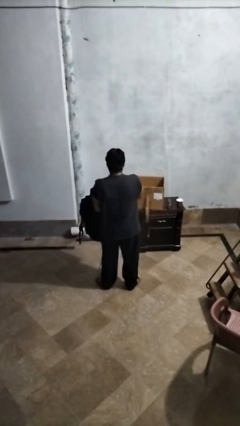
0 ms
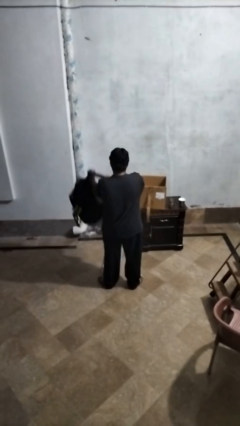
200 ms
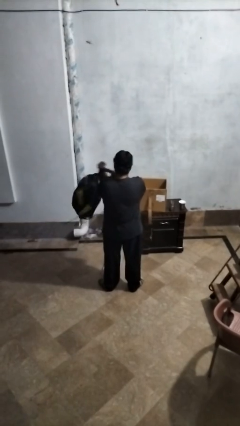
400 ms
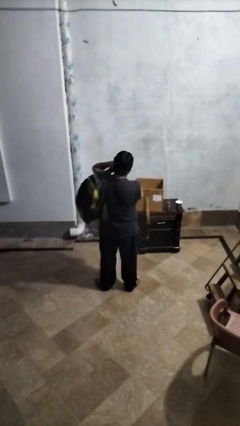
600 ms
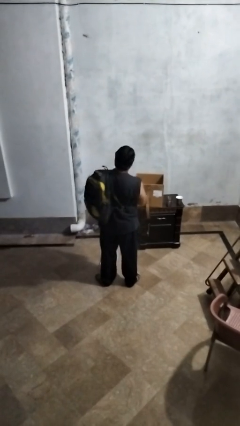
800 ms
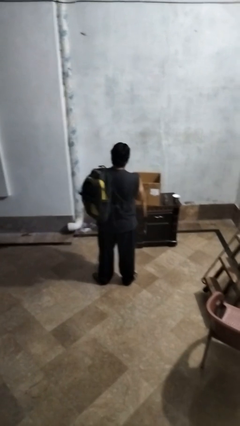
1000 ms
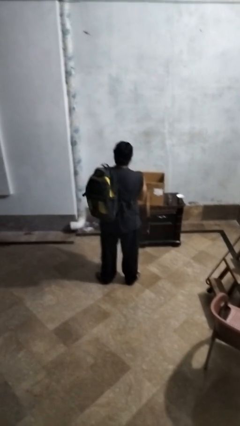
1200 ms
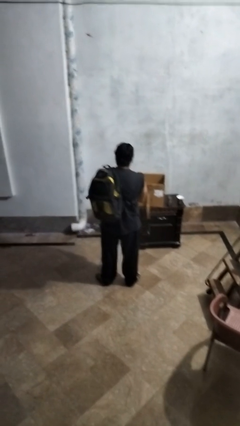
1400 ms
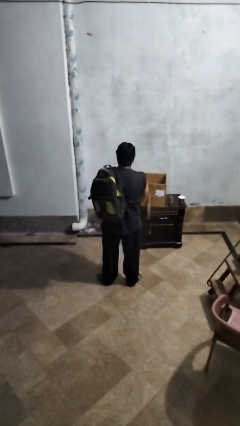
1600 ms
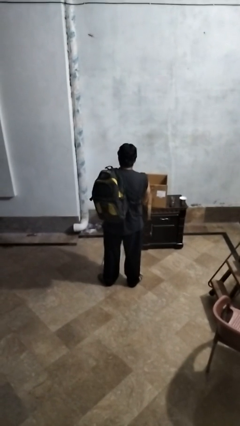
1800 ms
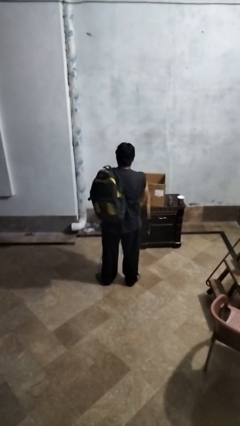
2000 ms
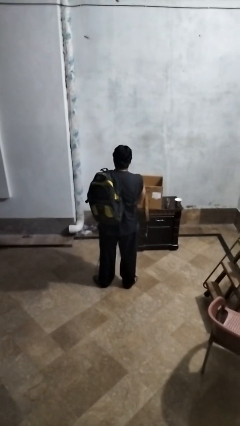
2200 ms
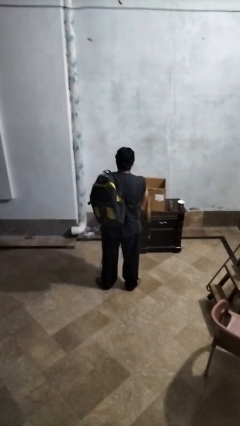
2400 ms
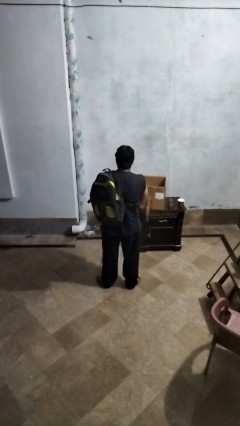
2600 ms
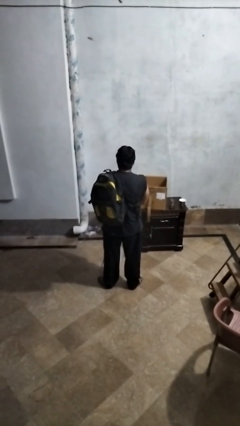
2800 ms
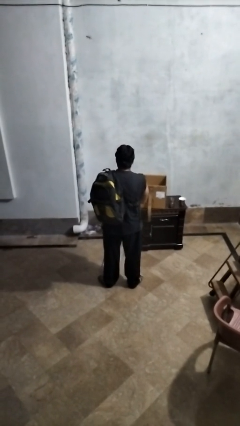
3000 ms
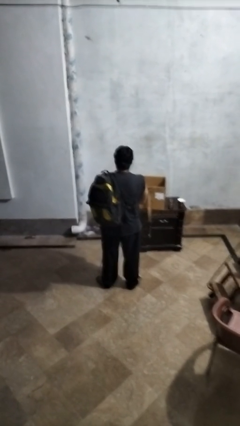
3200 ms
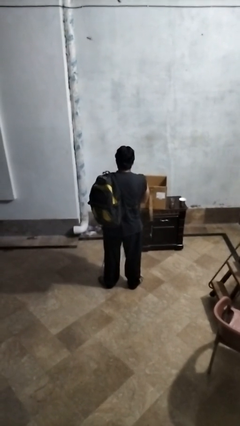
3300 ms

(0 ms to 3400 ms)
person puts on backpack

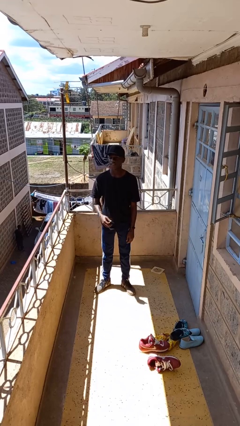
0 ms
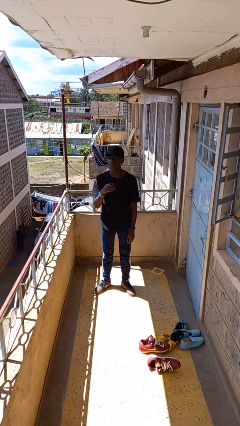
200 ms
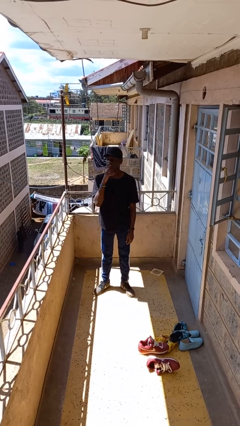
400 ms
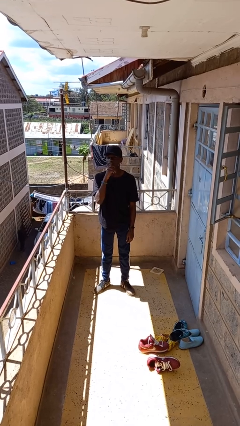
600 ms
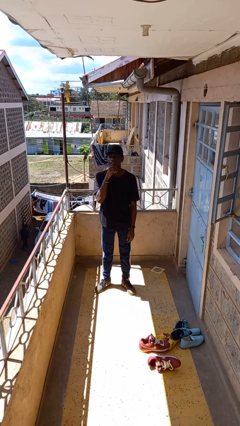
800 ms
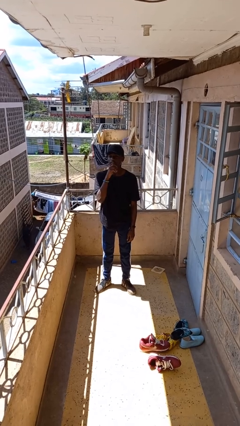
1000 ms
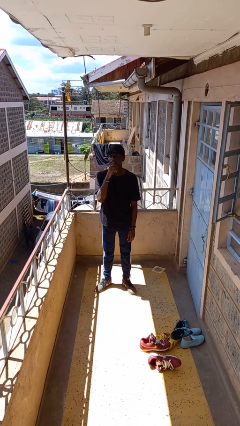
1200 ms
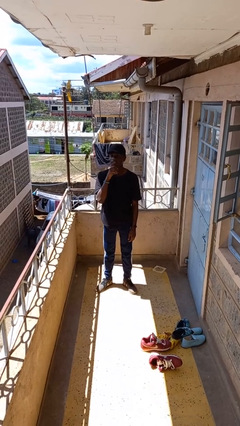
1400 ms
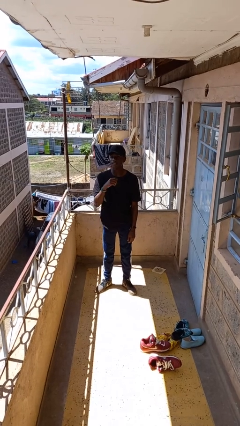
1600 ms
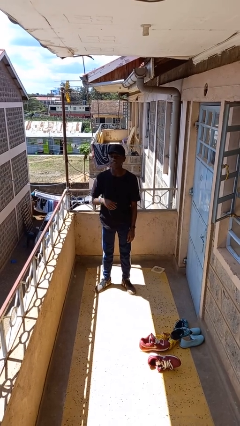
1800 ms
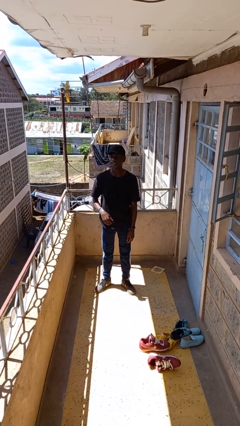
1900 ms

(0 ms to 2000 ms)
person strokes chin

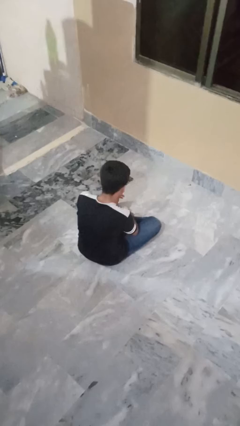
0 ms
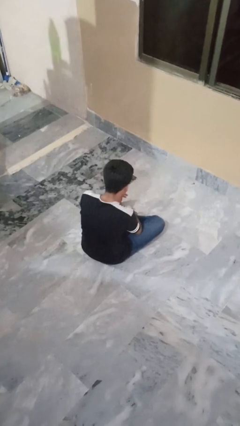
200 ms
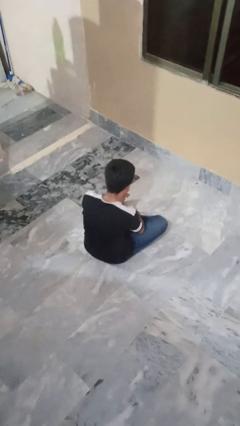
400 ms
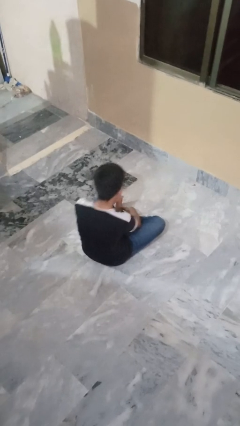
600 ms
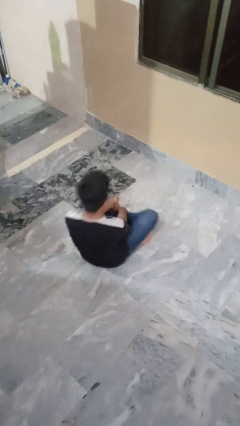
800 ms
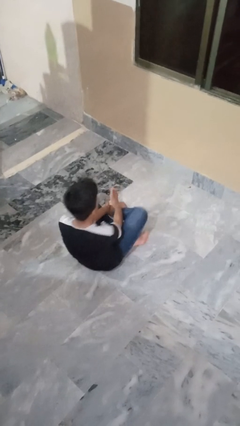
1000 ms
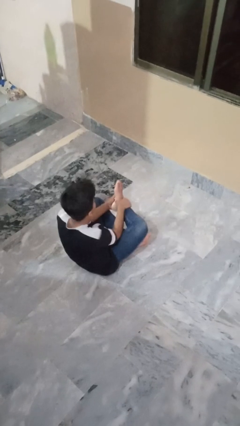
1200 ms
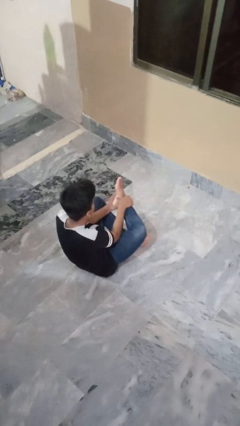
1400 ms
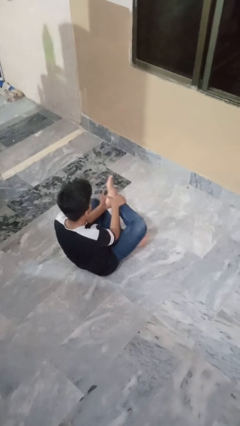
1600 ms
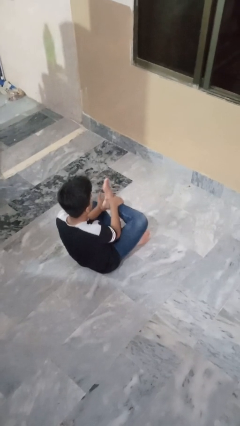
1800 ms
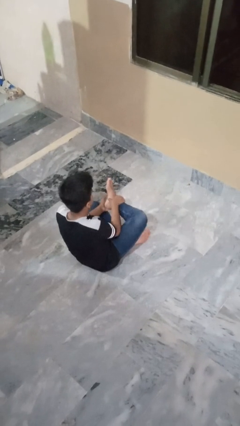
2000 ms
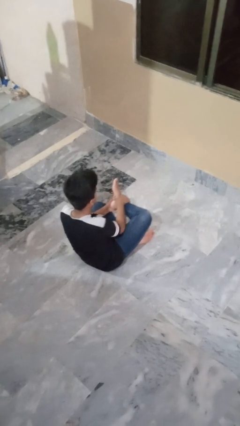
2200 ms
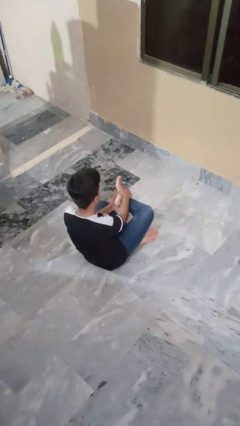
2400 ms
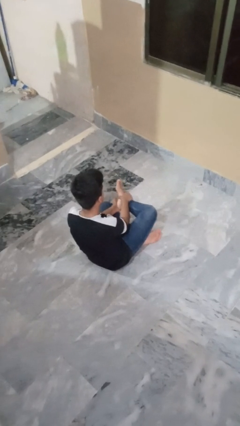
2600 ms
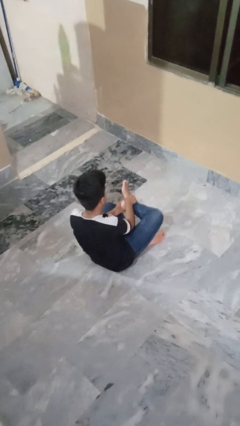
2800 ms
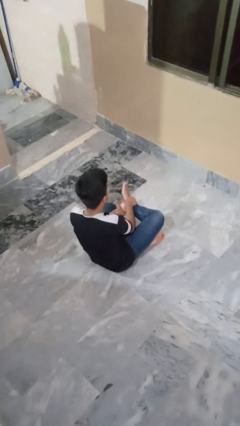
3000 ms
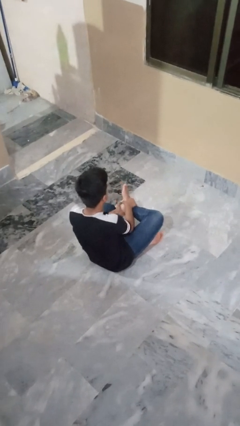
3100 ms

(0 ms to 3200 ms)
person stubs toe

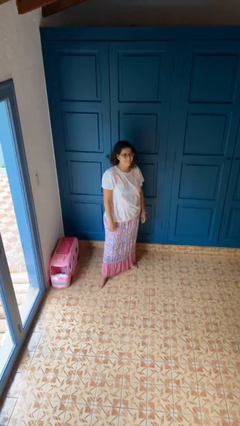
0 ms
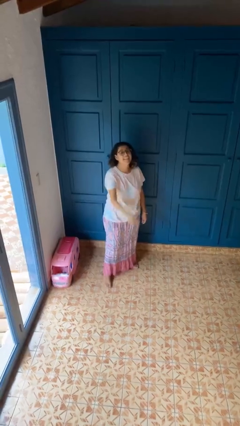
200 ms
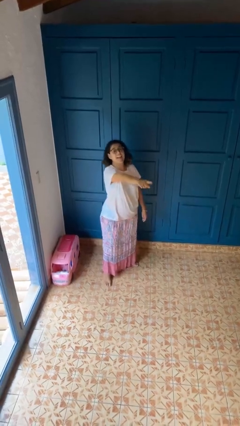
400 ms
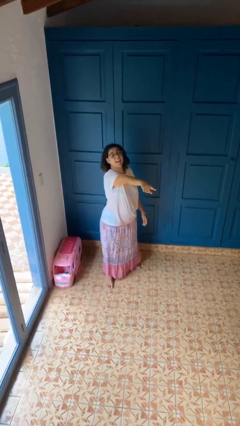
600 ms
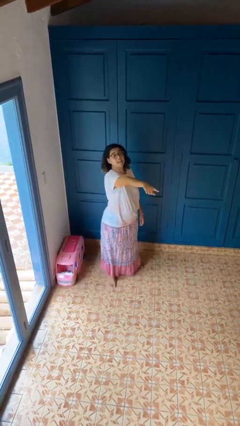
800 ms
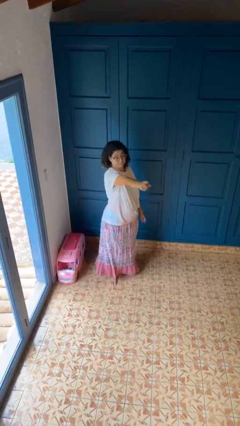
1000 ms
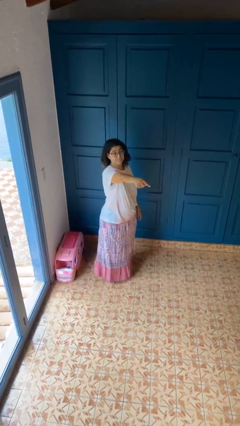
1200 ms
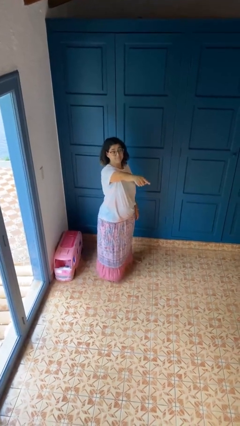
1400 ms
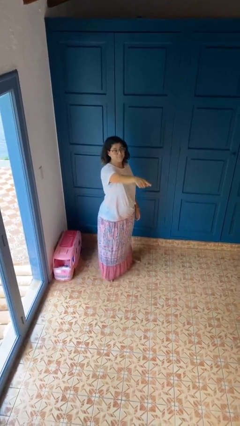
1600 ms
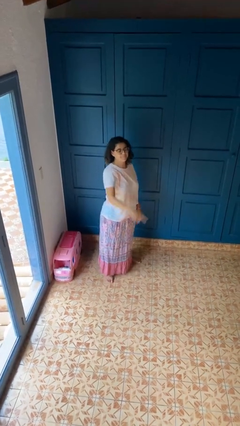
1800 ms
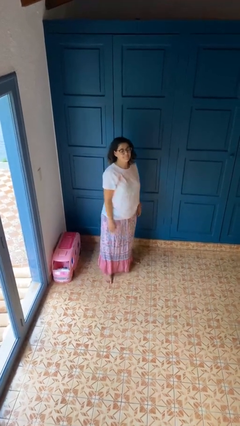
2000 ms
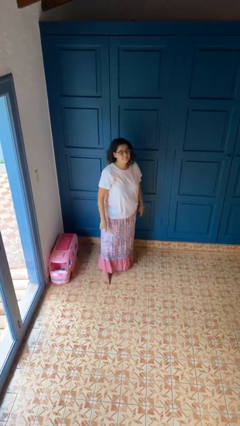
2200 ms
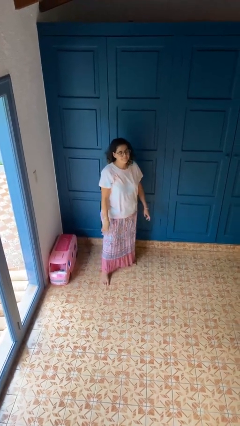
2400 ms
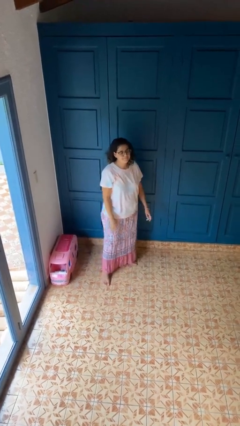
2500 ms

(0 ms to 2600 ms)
person points at person

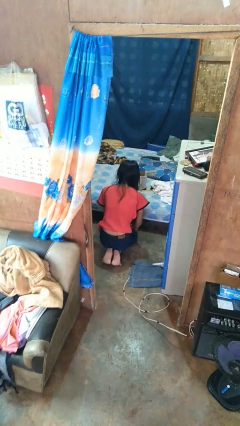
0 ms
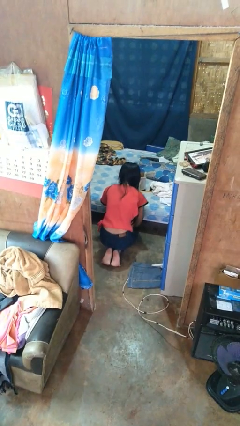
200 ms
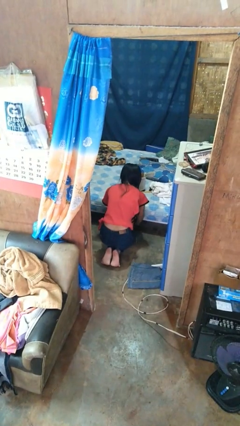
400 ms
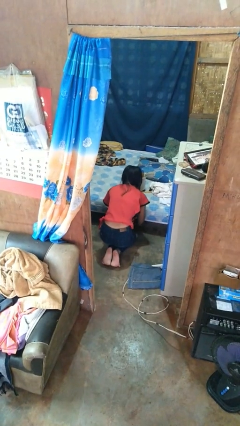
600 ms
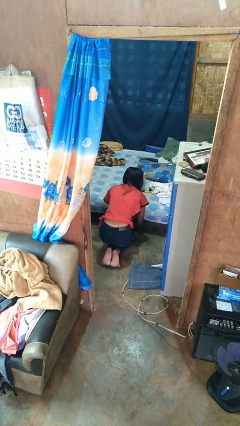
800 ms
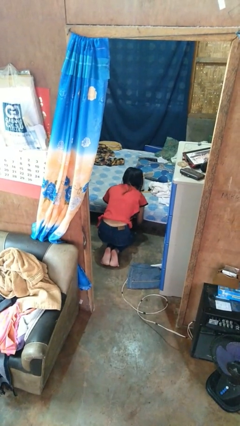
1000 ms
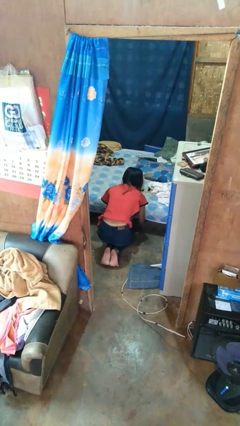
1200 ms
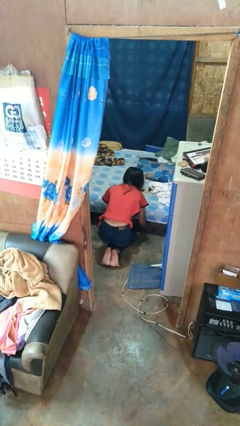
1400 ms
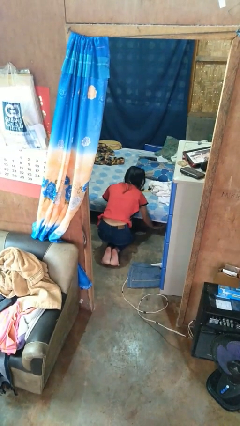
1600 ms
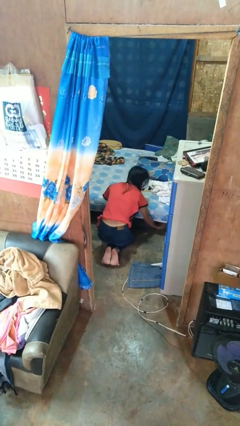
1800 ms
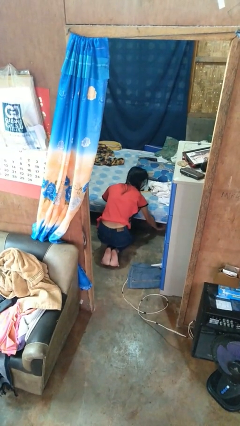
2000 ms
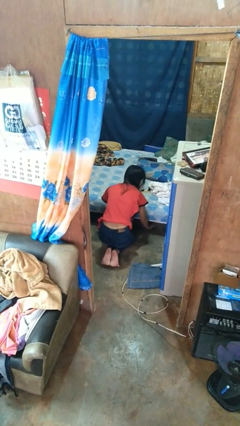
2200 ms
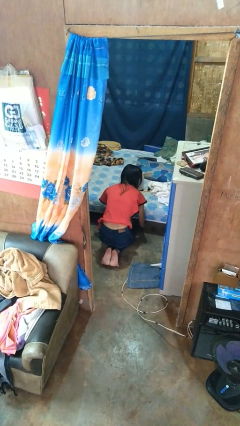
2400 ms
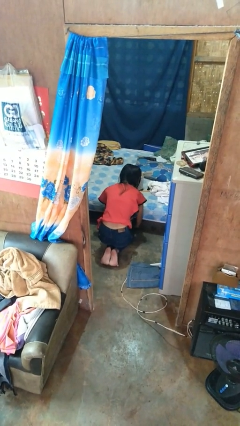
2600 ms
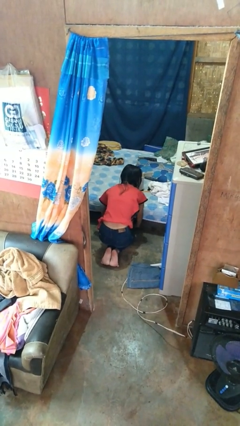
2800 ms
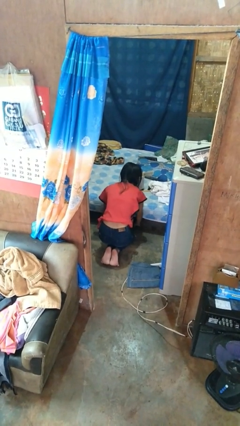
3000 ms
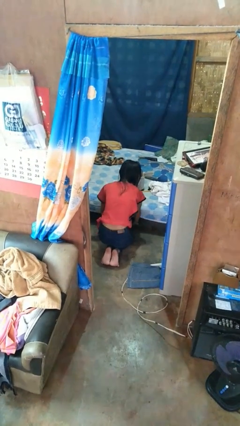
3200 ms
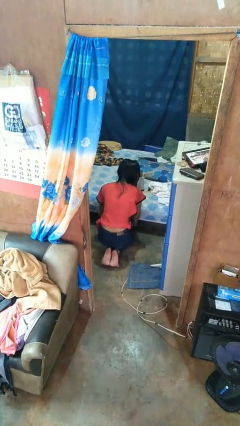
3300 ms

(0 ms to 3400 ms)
person searches under bed

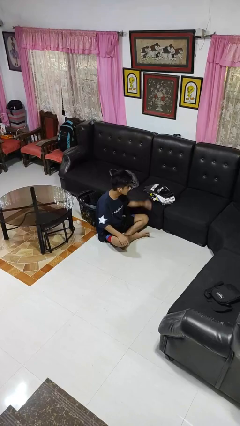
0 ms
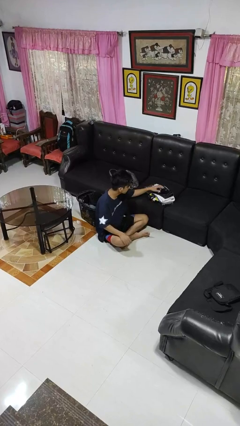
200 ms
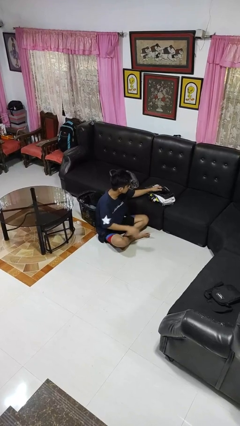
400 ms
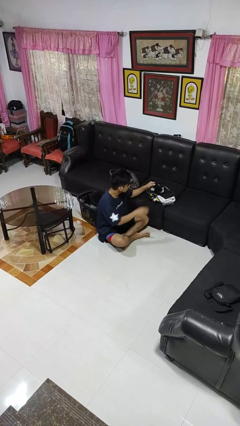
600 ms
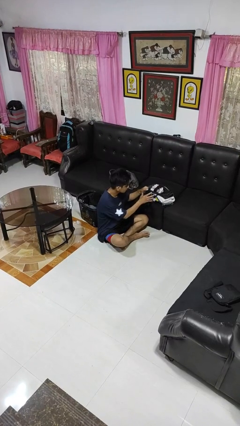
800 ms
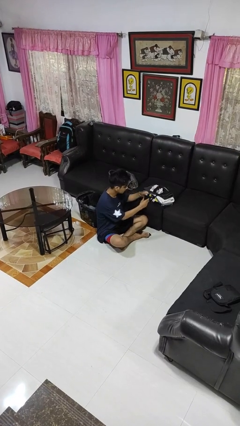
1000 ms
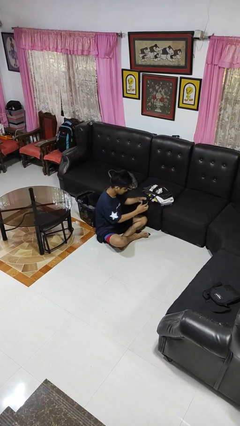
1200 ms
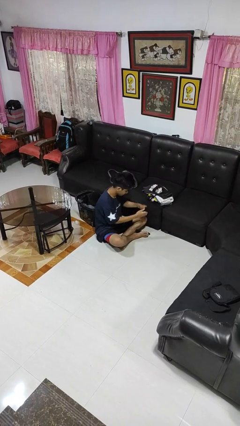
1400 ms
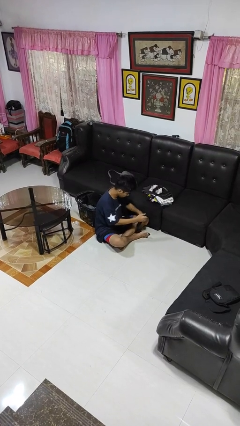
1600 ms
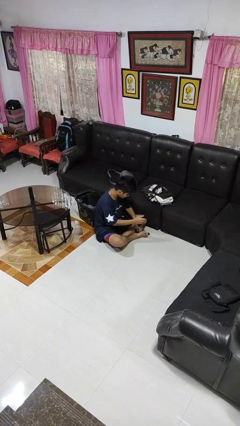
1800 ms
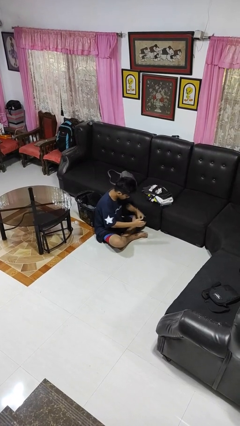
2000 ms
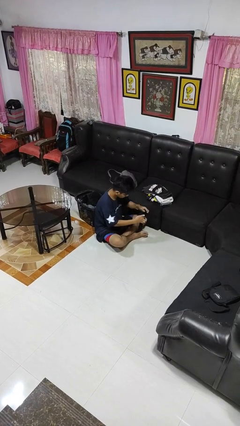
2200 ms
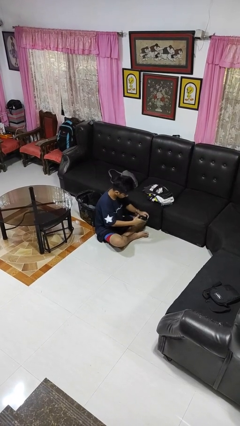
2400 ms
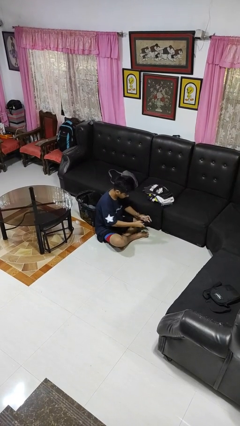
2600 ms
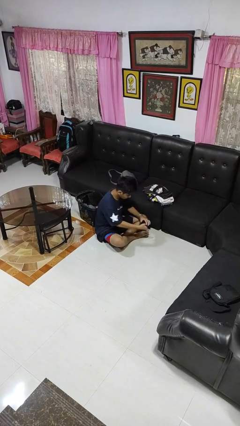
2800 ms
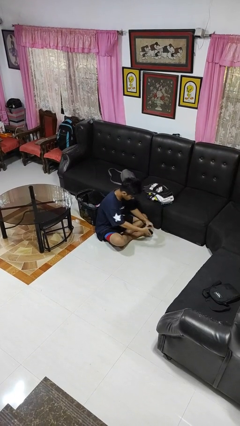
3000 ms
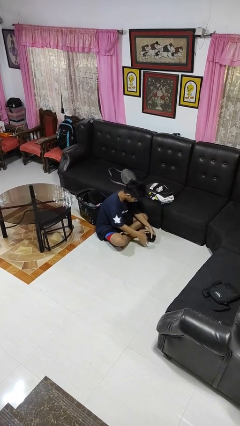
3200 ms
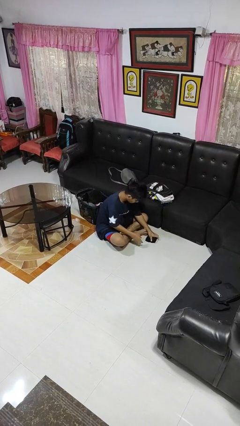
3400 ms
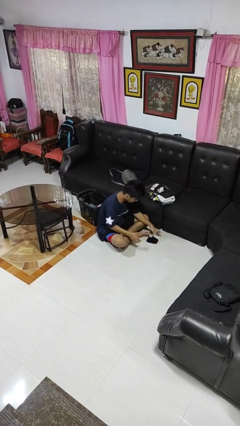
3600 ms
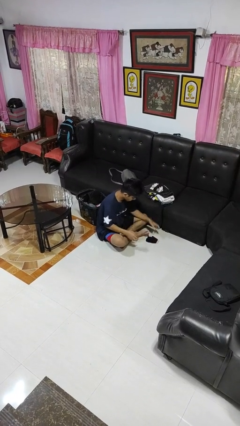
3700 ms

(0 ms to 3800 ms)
person folds socks
